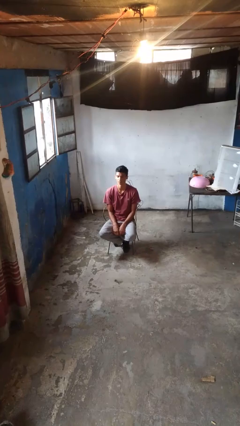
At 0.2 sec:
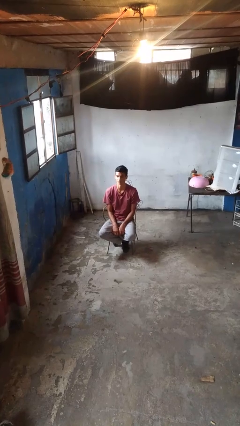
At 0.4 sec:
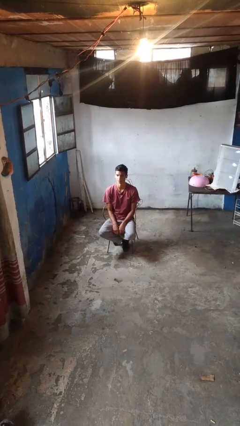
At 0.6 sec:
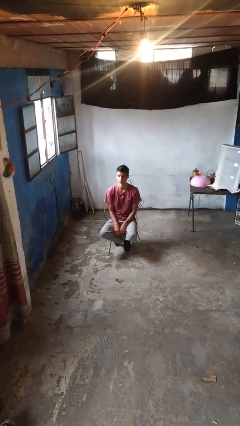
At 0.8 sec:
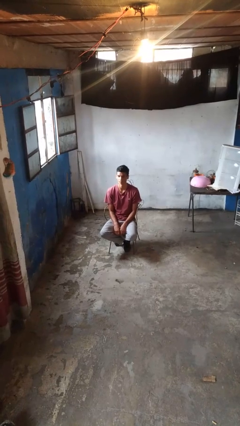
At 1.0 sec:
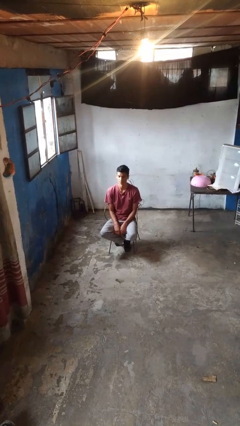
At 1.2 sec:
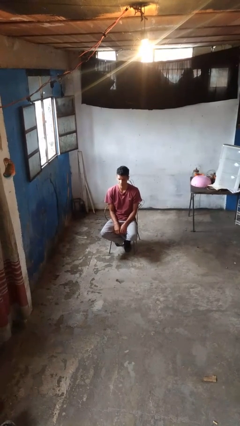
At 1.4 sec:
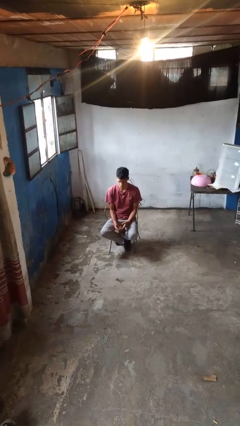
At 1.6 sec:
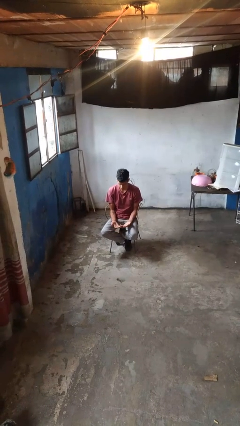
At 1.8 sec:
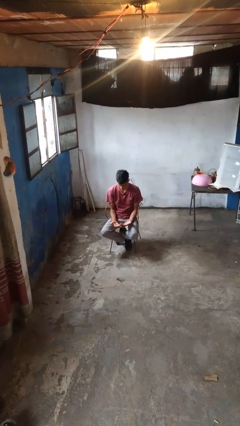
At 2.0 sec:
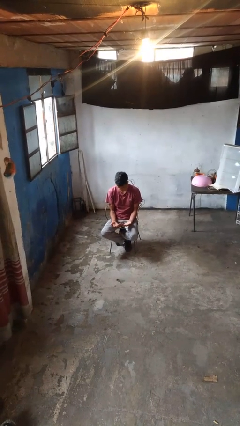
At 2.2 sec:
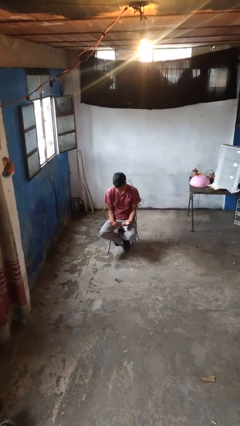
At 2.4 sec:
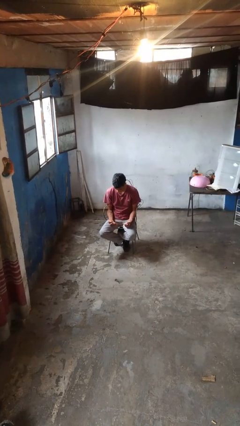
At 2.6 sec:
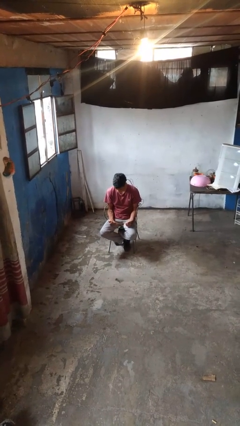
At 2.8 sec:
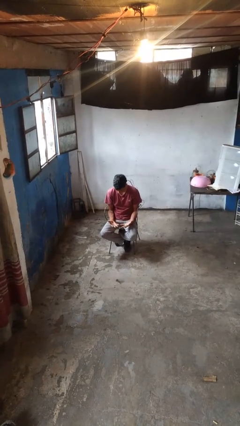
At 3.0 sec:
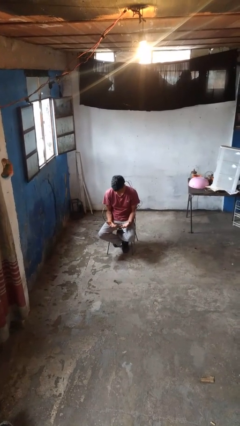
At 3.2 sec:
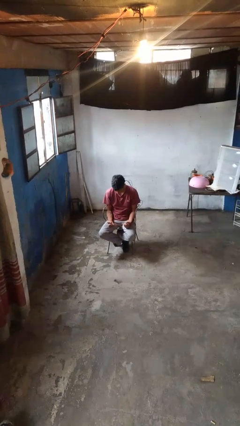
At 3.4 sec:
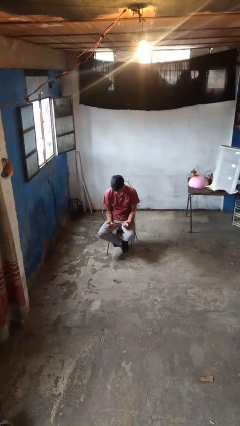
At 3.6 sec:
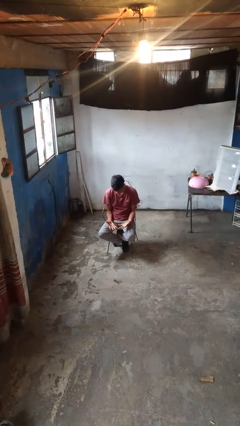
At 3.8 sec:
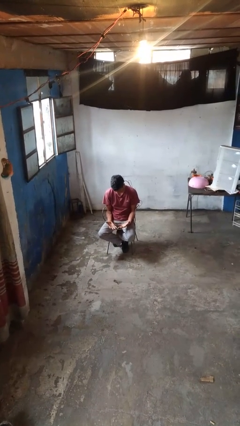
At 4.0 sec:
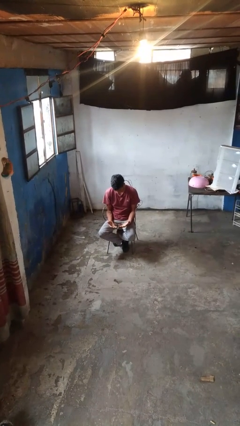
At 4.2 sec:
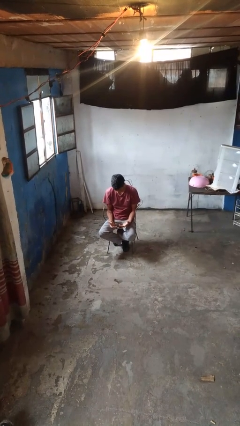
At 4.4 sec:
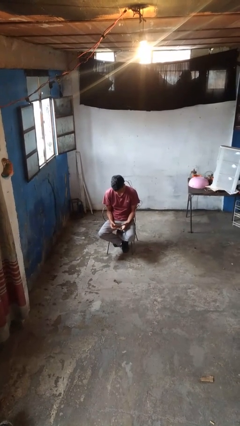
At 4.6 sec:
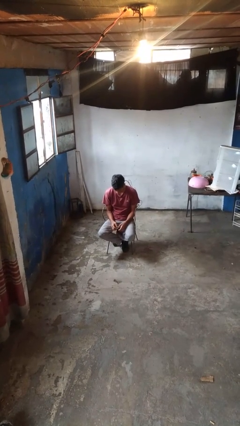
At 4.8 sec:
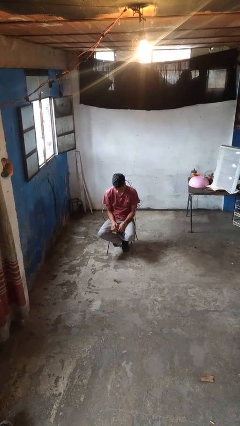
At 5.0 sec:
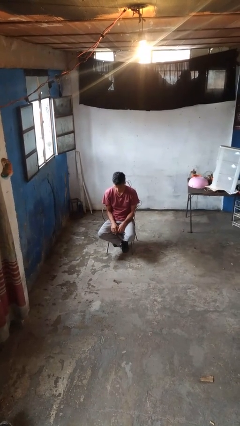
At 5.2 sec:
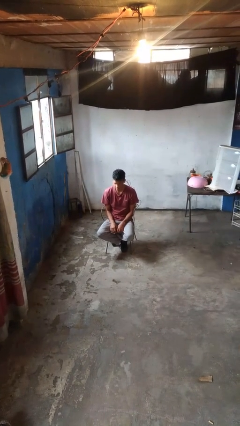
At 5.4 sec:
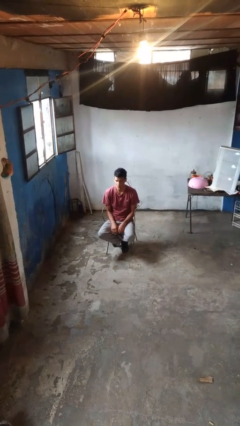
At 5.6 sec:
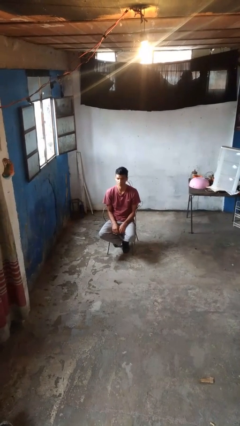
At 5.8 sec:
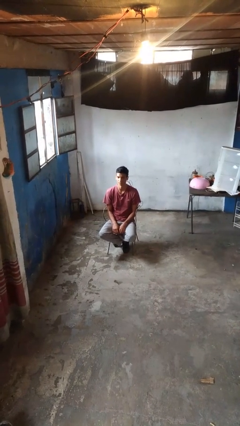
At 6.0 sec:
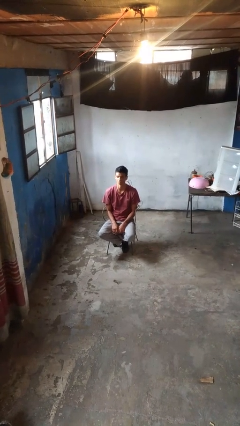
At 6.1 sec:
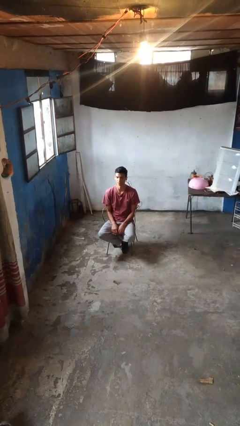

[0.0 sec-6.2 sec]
person looks at hands in lap

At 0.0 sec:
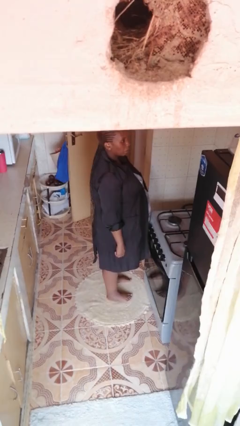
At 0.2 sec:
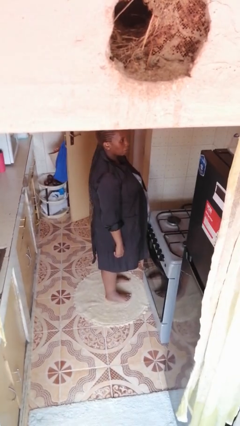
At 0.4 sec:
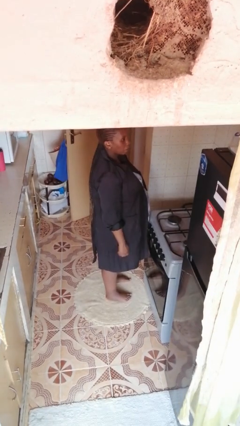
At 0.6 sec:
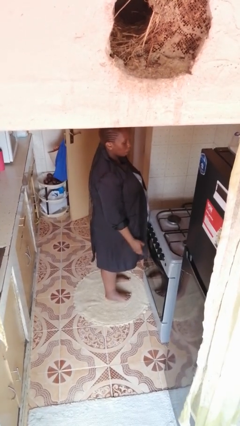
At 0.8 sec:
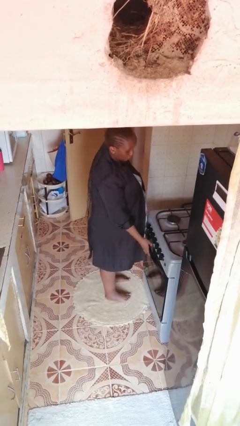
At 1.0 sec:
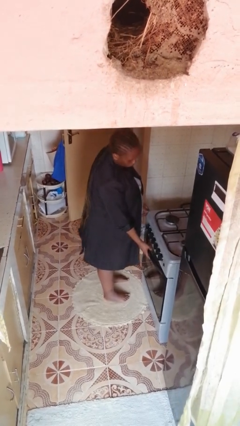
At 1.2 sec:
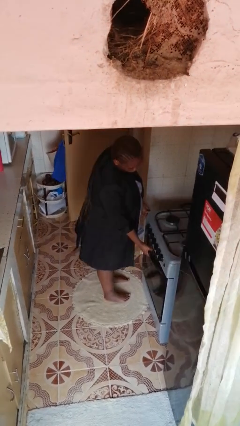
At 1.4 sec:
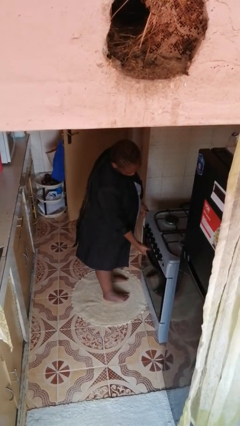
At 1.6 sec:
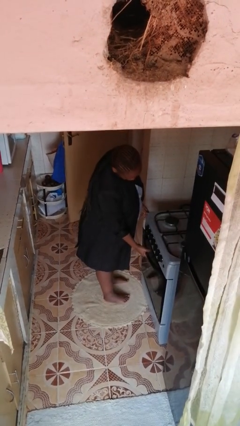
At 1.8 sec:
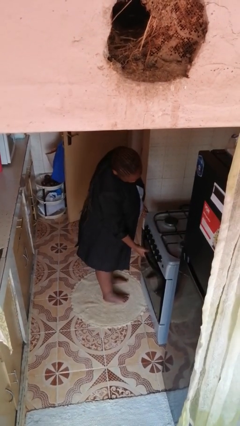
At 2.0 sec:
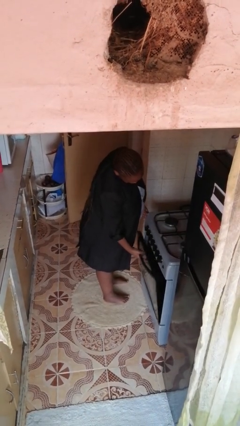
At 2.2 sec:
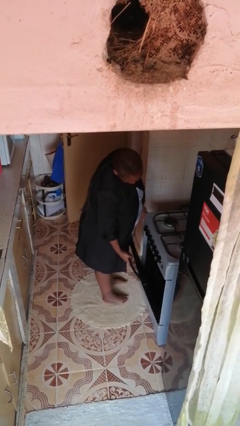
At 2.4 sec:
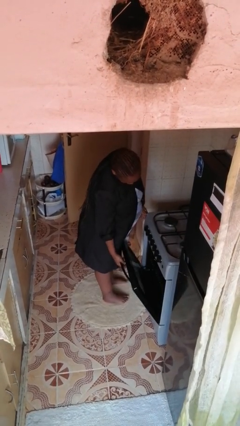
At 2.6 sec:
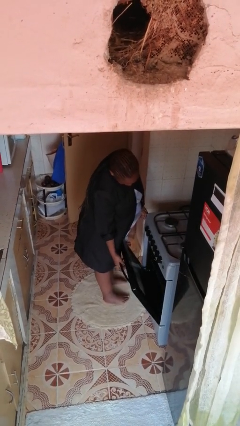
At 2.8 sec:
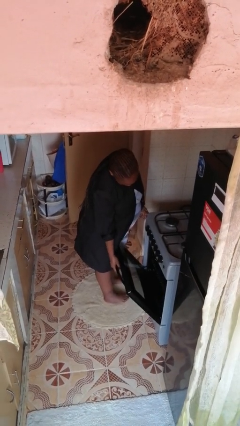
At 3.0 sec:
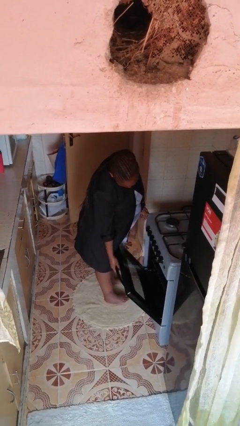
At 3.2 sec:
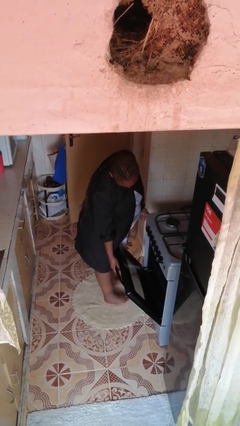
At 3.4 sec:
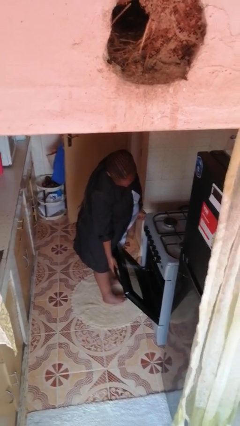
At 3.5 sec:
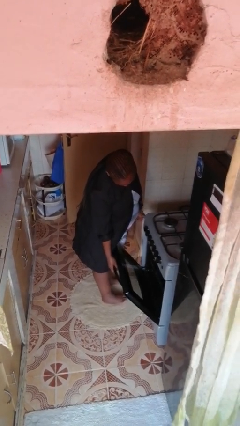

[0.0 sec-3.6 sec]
person opens oven door

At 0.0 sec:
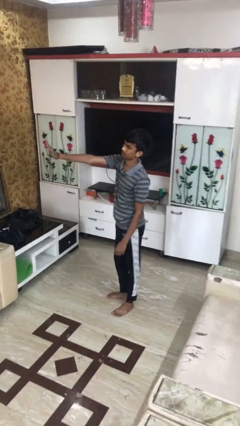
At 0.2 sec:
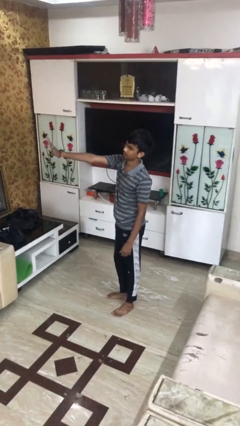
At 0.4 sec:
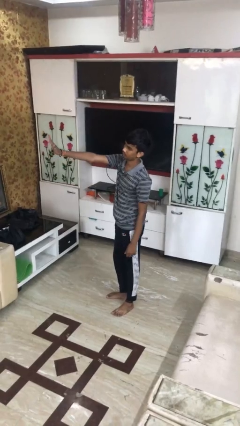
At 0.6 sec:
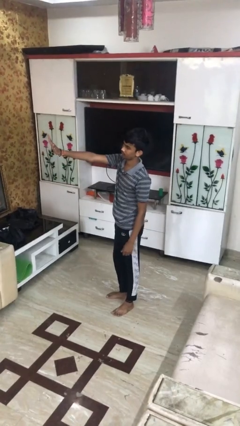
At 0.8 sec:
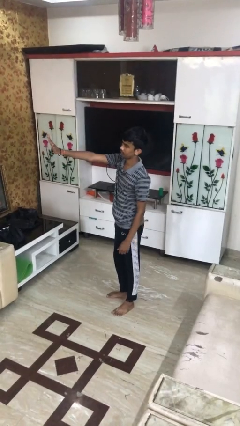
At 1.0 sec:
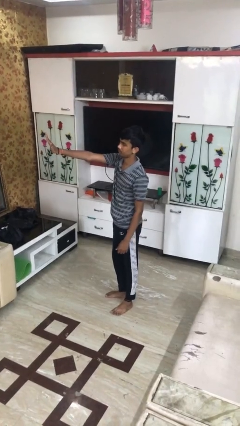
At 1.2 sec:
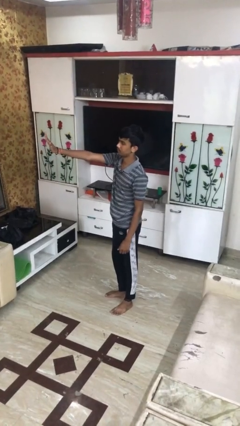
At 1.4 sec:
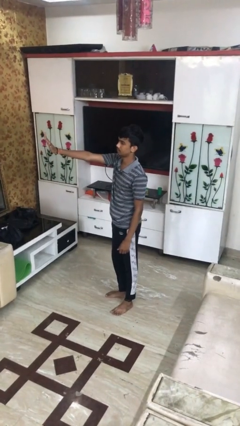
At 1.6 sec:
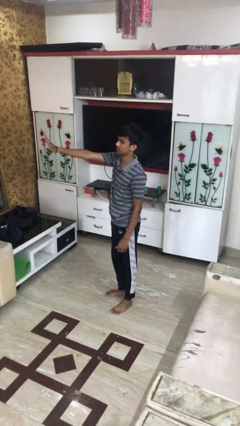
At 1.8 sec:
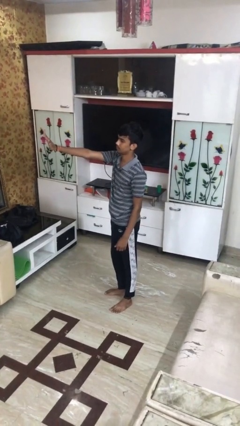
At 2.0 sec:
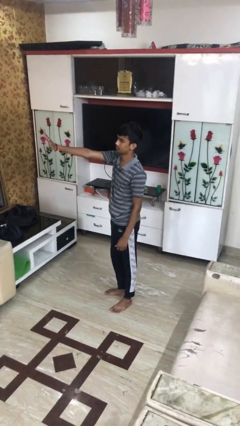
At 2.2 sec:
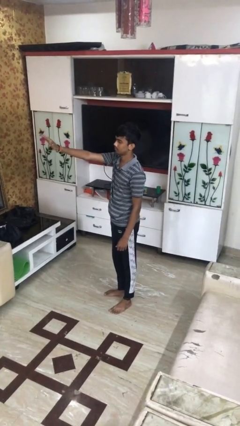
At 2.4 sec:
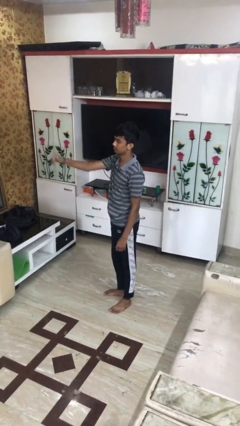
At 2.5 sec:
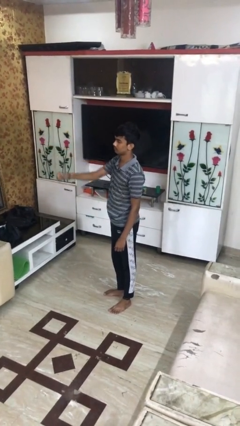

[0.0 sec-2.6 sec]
person gestures stop

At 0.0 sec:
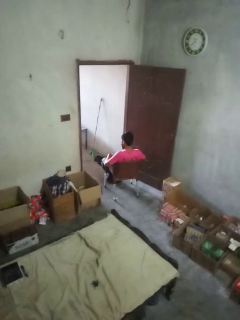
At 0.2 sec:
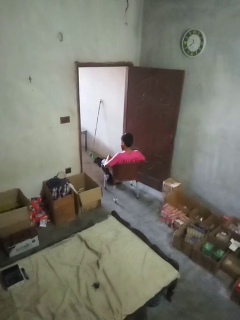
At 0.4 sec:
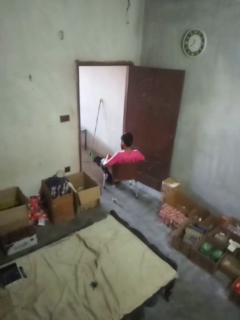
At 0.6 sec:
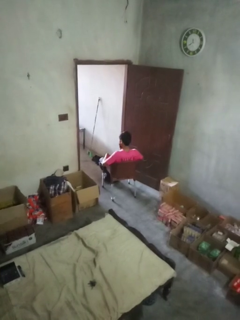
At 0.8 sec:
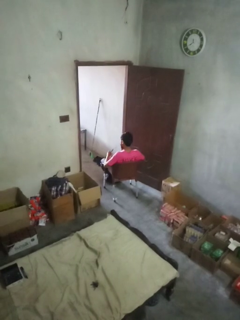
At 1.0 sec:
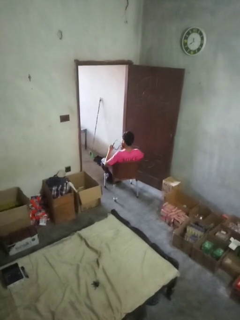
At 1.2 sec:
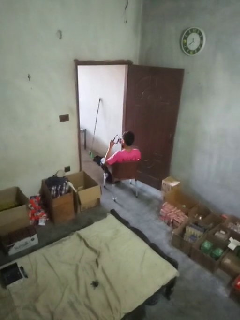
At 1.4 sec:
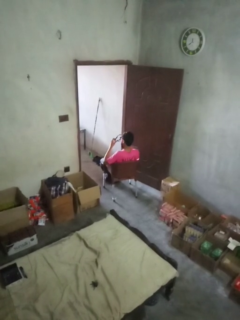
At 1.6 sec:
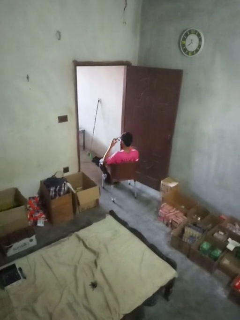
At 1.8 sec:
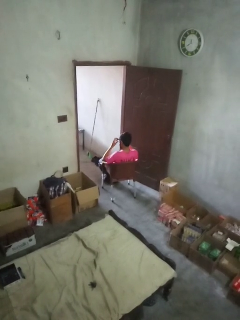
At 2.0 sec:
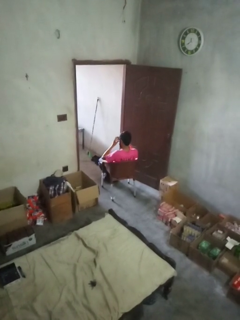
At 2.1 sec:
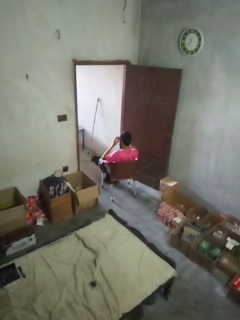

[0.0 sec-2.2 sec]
person puts on glasses

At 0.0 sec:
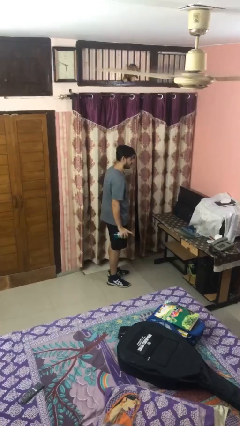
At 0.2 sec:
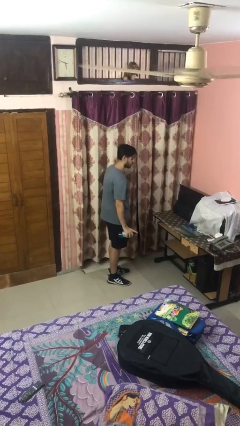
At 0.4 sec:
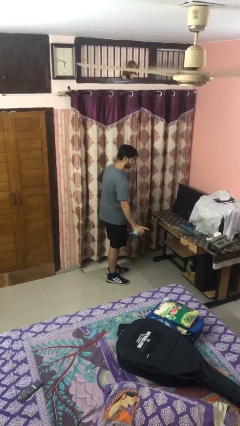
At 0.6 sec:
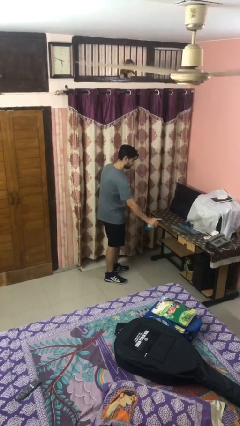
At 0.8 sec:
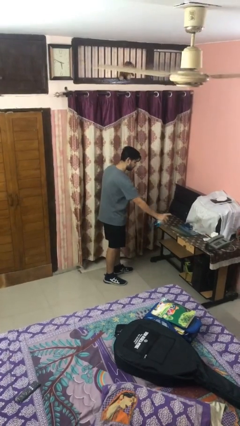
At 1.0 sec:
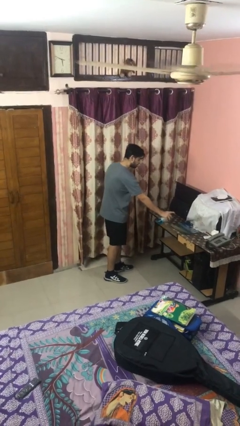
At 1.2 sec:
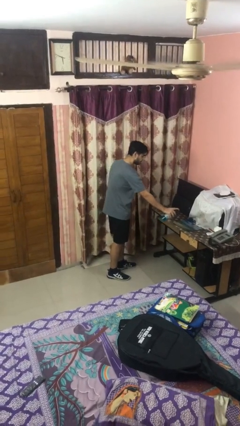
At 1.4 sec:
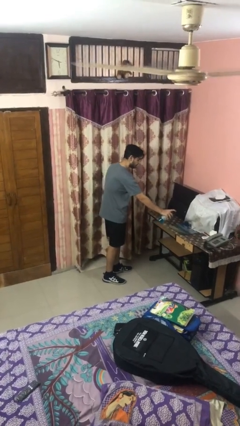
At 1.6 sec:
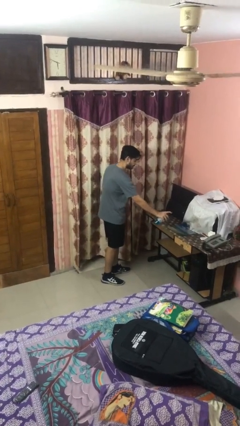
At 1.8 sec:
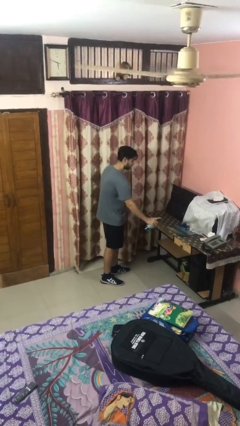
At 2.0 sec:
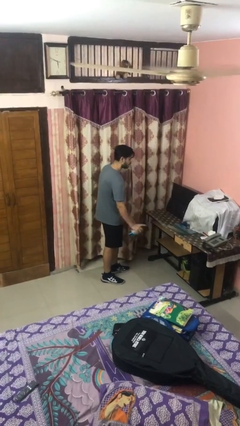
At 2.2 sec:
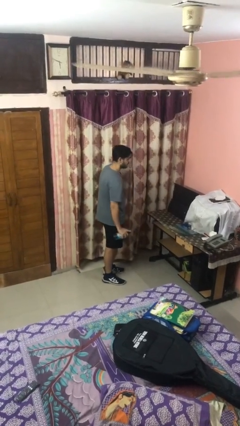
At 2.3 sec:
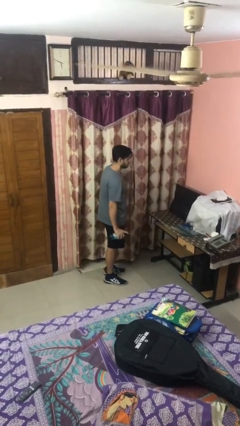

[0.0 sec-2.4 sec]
person sprays from bottle

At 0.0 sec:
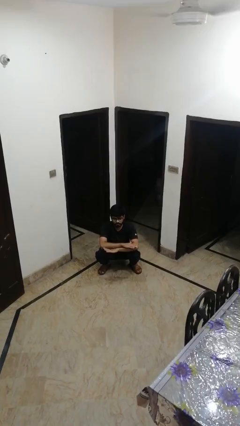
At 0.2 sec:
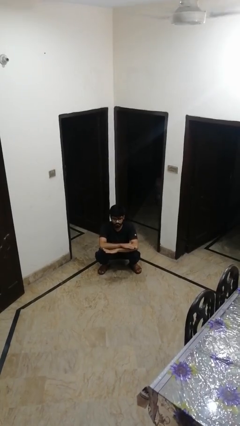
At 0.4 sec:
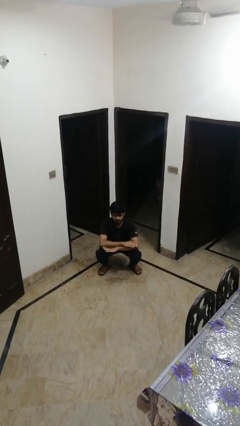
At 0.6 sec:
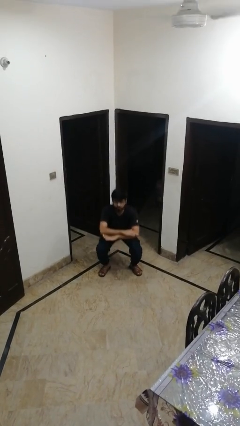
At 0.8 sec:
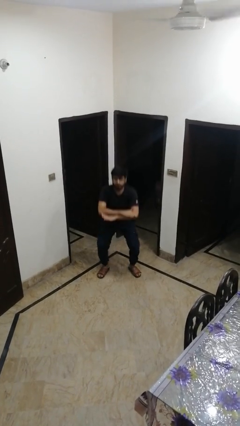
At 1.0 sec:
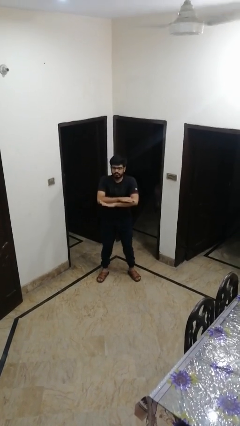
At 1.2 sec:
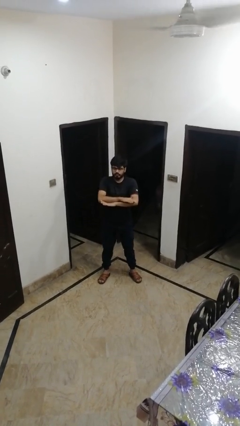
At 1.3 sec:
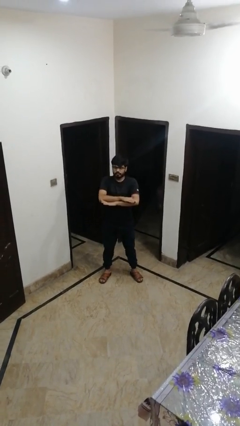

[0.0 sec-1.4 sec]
person stands up
